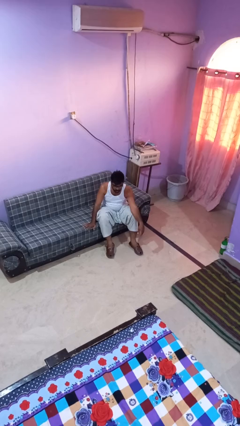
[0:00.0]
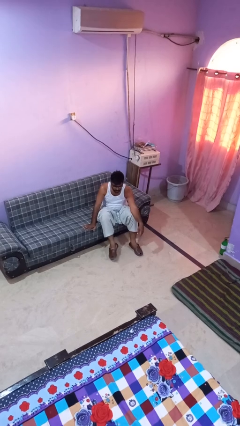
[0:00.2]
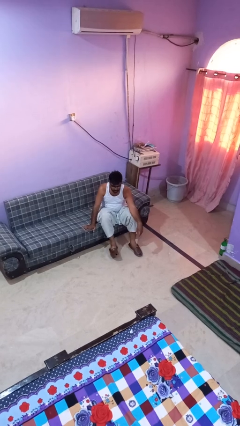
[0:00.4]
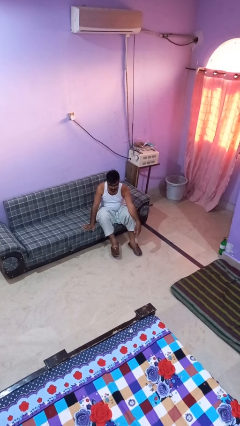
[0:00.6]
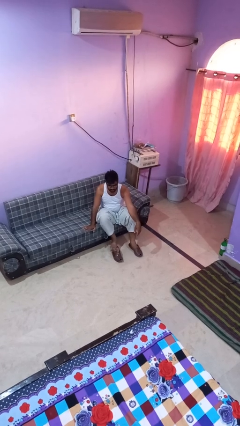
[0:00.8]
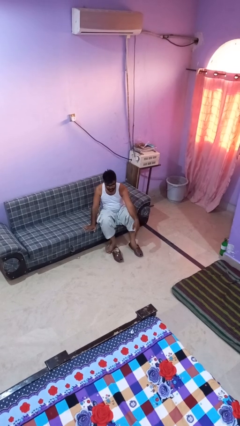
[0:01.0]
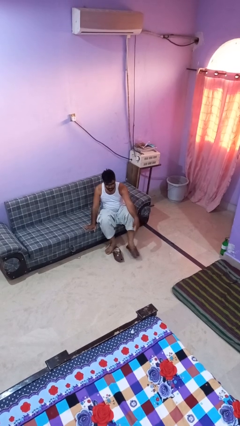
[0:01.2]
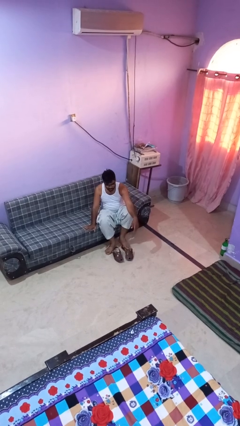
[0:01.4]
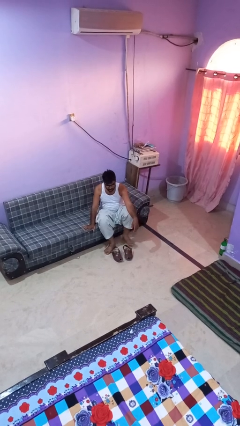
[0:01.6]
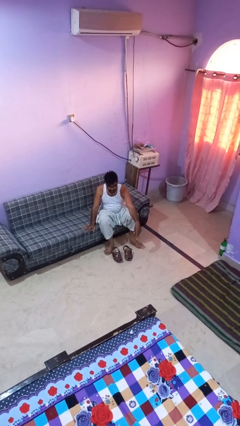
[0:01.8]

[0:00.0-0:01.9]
person takes off shoes

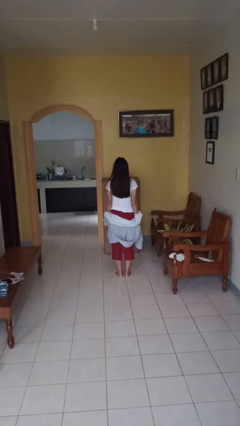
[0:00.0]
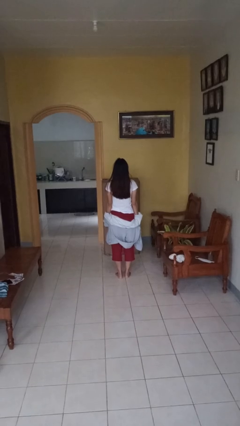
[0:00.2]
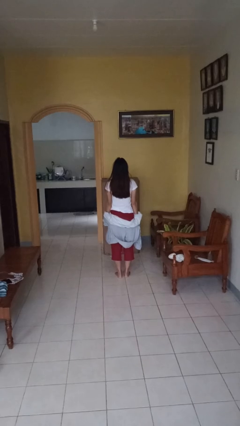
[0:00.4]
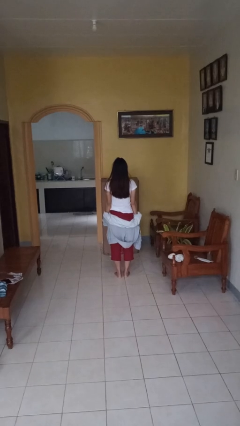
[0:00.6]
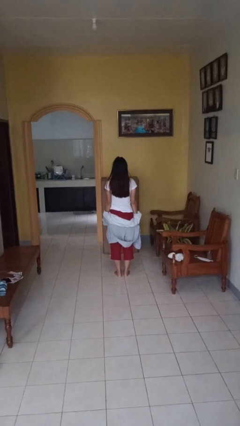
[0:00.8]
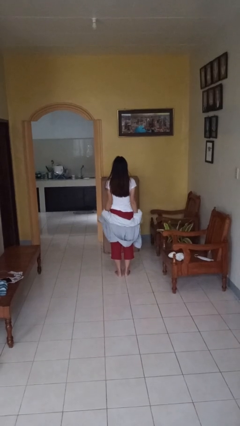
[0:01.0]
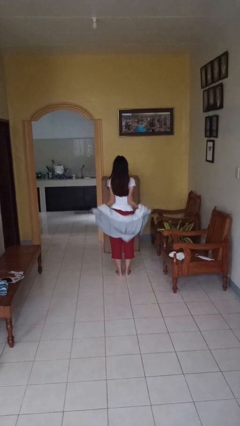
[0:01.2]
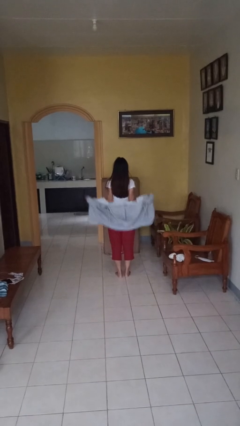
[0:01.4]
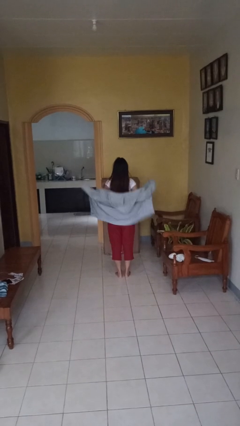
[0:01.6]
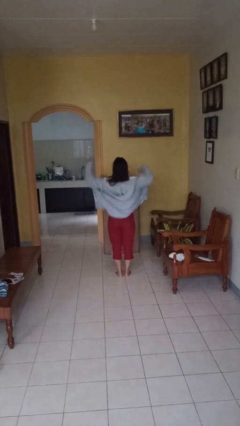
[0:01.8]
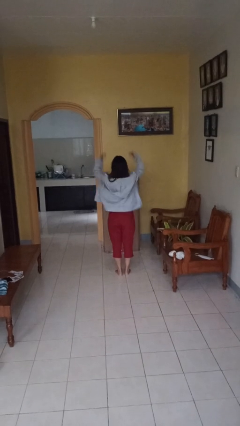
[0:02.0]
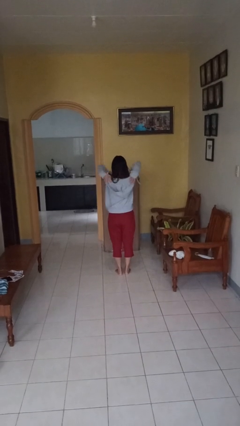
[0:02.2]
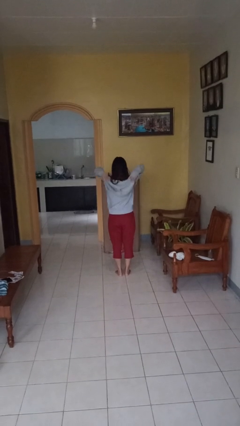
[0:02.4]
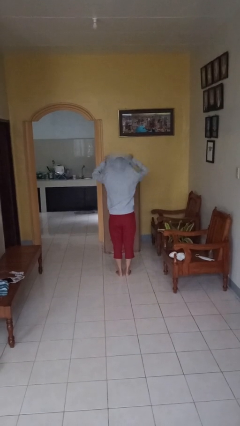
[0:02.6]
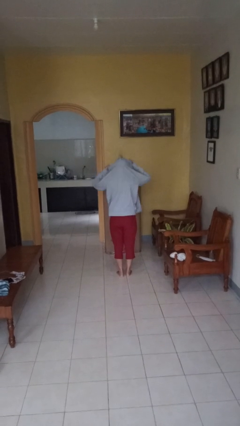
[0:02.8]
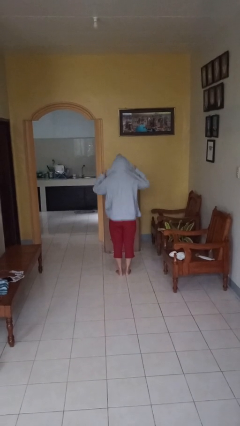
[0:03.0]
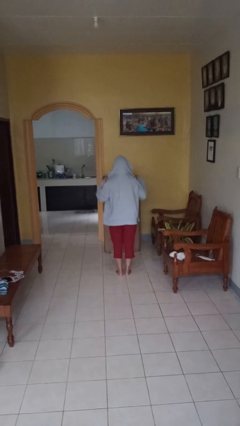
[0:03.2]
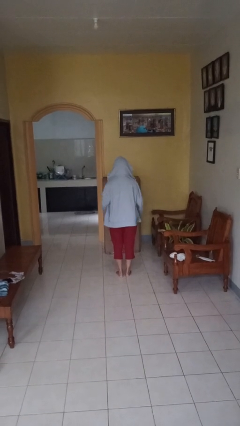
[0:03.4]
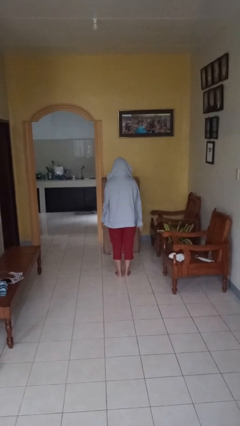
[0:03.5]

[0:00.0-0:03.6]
person puts on hoodie

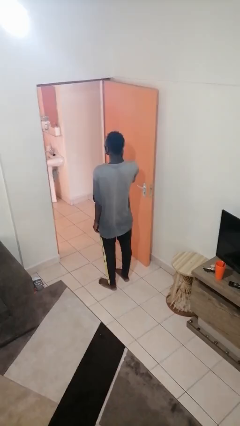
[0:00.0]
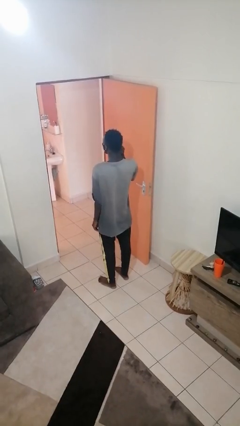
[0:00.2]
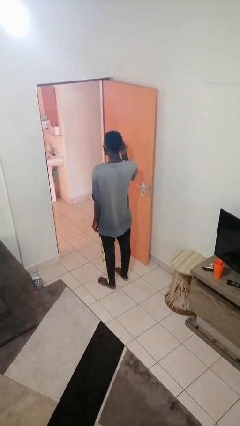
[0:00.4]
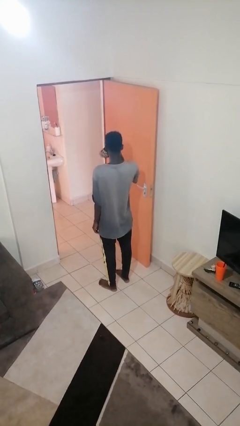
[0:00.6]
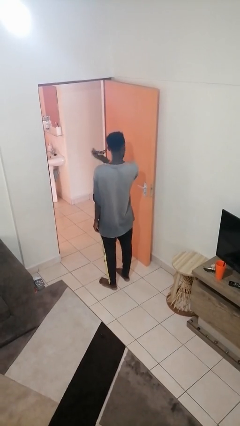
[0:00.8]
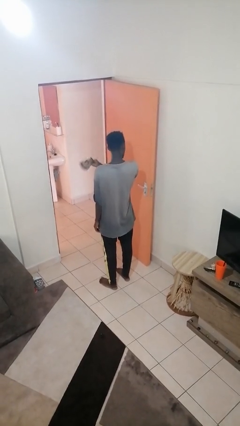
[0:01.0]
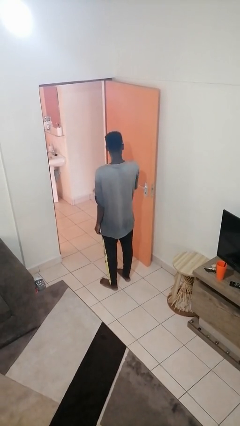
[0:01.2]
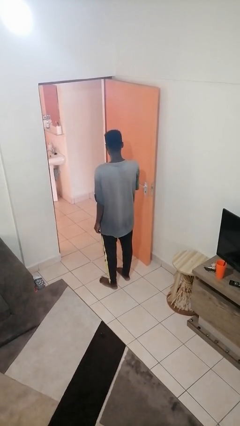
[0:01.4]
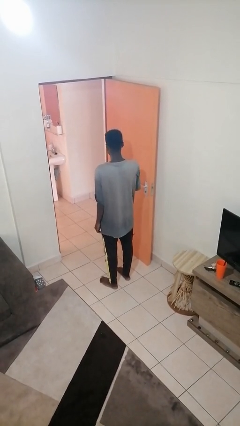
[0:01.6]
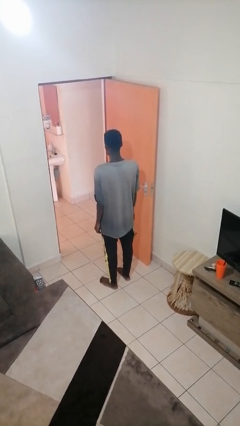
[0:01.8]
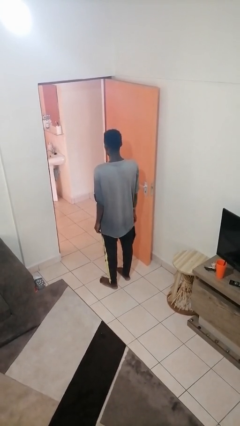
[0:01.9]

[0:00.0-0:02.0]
person takes off facemask

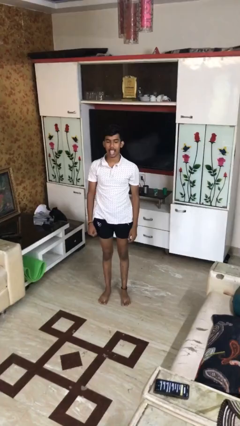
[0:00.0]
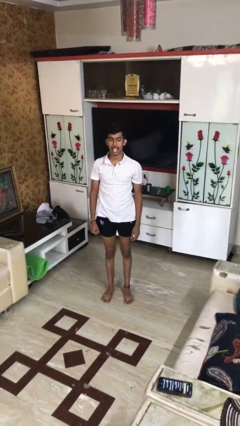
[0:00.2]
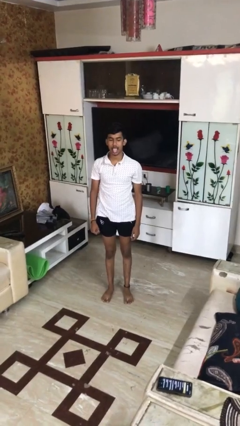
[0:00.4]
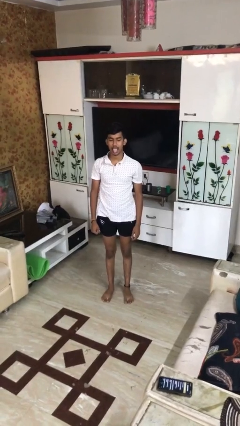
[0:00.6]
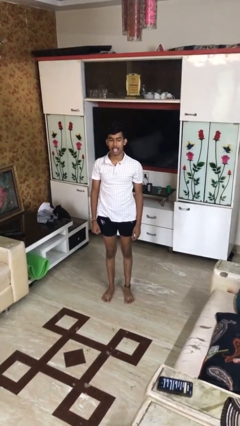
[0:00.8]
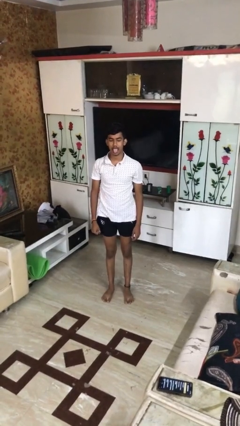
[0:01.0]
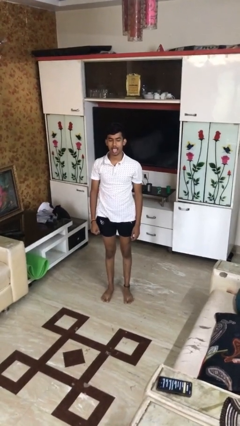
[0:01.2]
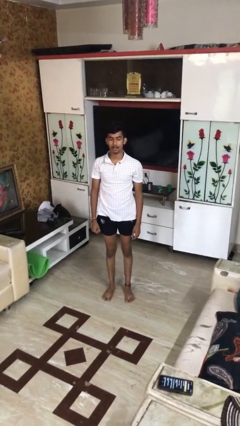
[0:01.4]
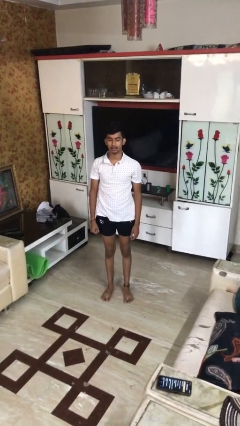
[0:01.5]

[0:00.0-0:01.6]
person sticks out tongue

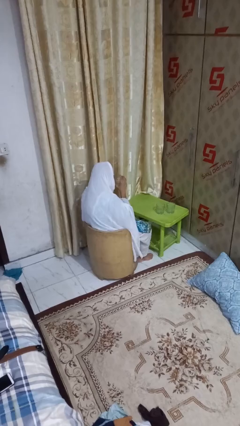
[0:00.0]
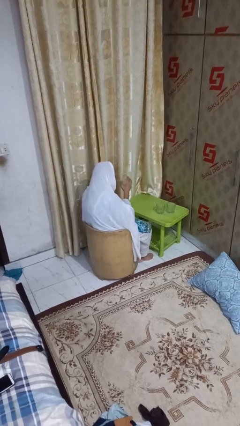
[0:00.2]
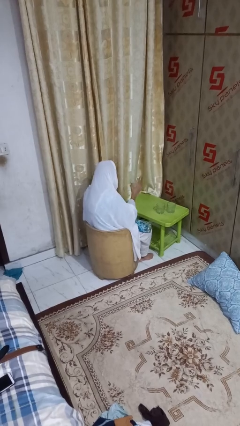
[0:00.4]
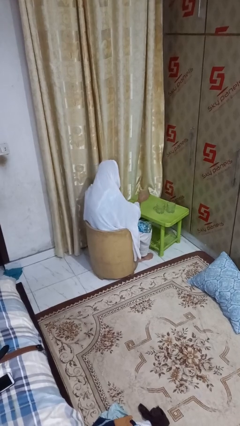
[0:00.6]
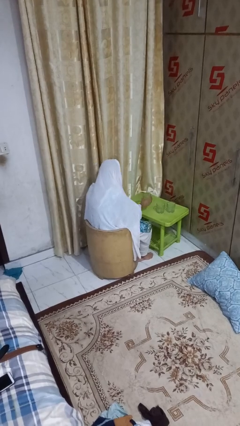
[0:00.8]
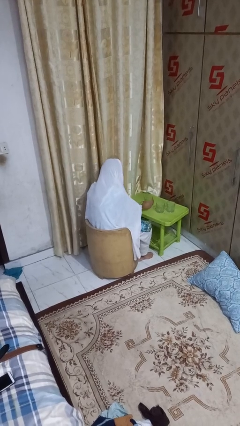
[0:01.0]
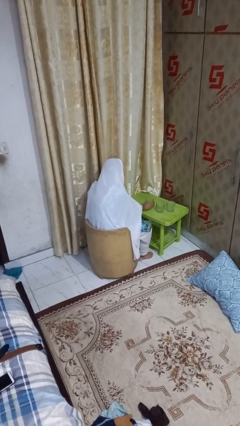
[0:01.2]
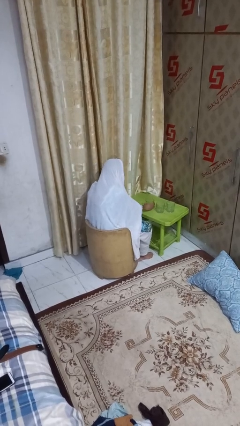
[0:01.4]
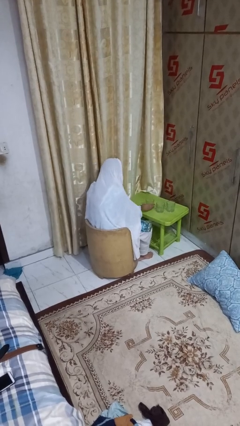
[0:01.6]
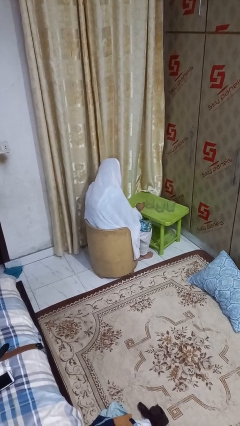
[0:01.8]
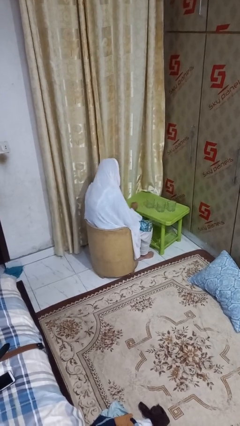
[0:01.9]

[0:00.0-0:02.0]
person puts down object on table

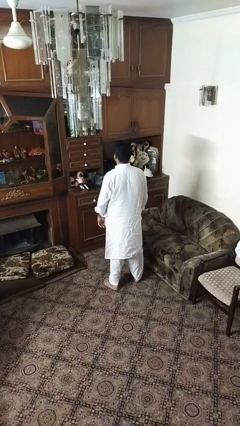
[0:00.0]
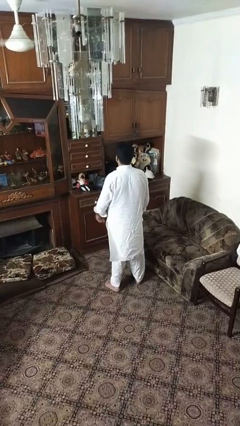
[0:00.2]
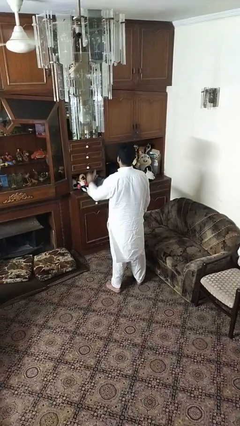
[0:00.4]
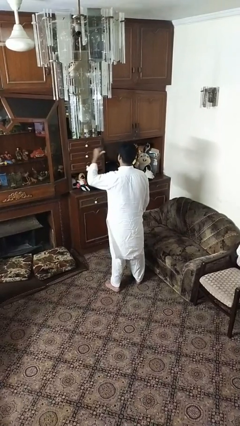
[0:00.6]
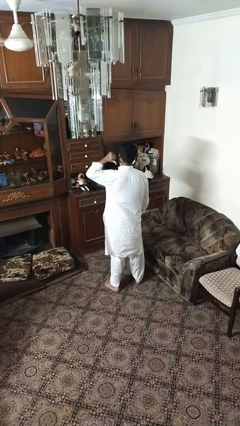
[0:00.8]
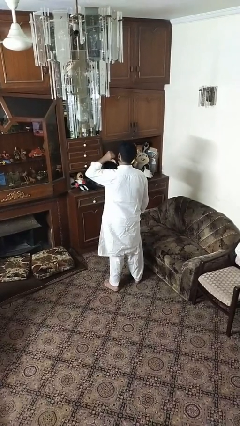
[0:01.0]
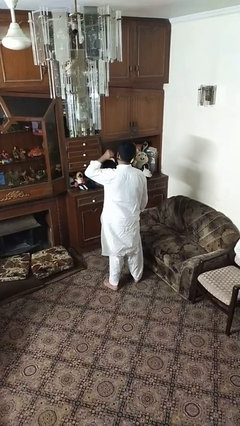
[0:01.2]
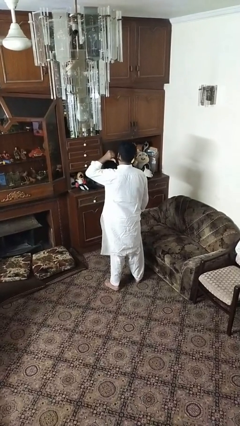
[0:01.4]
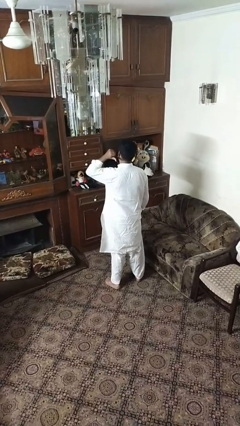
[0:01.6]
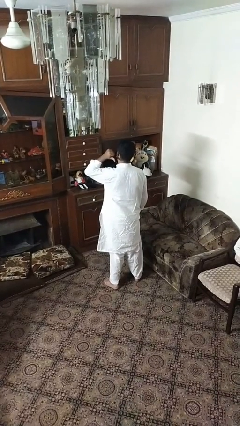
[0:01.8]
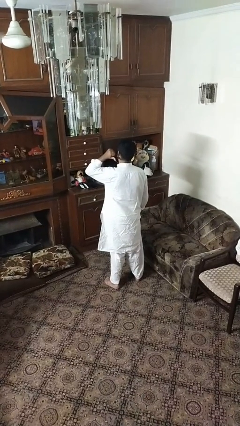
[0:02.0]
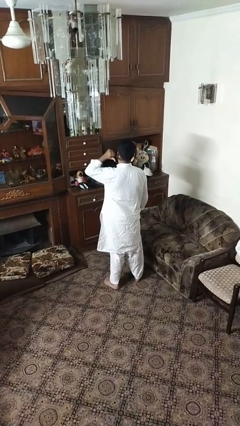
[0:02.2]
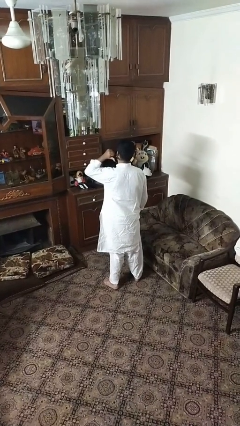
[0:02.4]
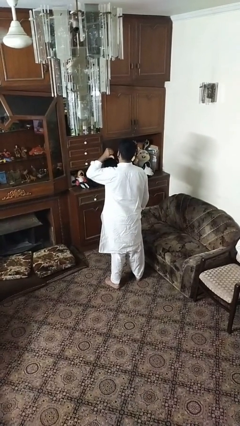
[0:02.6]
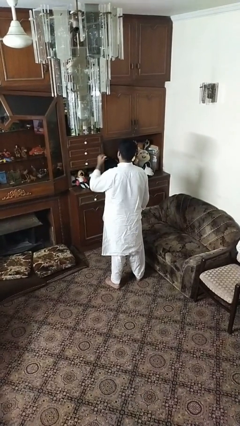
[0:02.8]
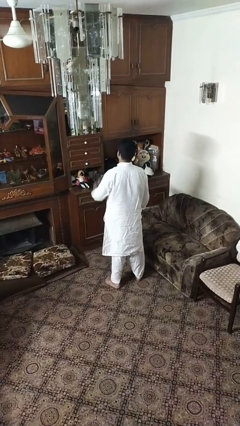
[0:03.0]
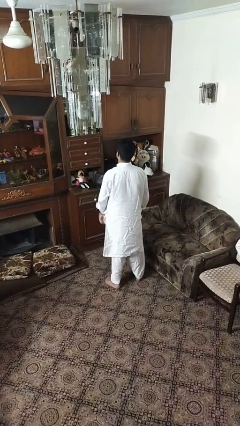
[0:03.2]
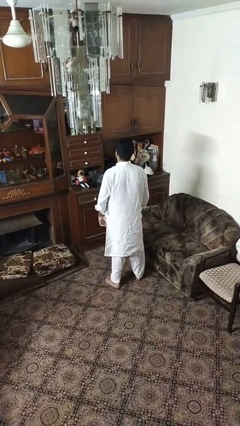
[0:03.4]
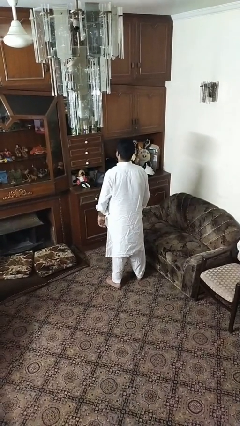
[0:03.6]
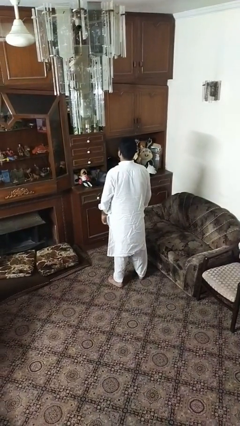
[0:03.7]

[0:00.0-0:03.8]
person gestures behind me

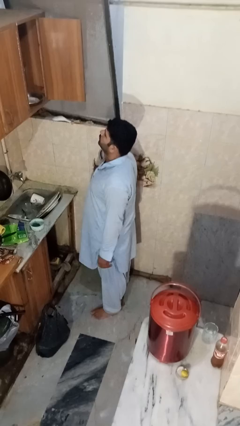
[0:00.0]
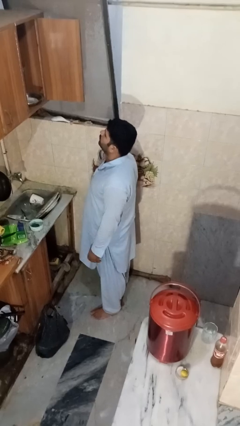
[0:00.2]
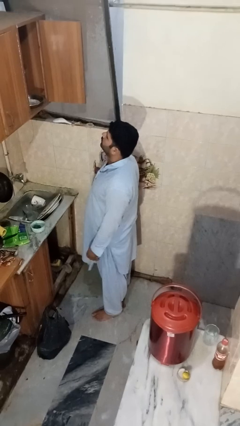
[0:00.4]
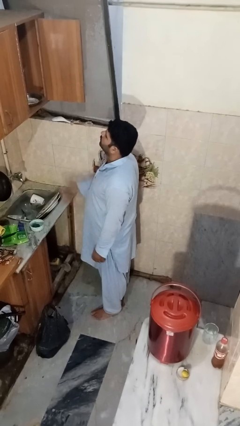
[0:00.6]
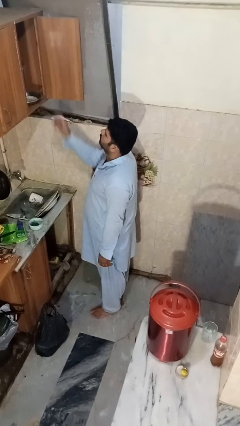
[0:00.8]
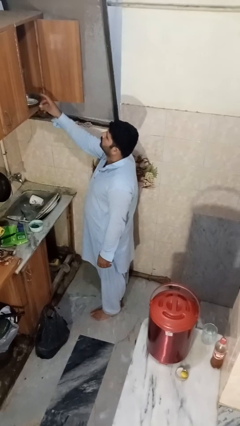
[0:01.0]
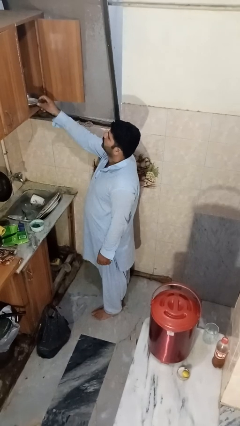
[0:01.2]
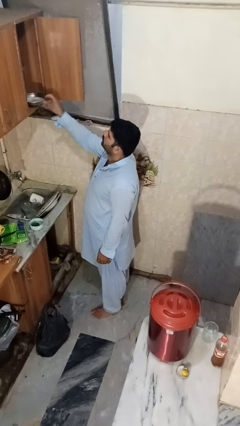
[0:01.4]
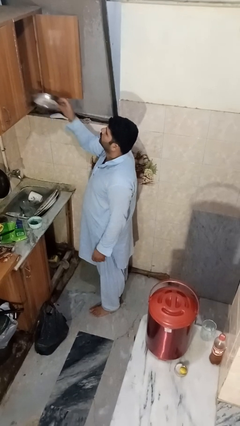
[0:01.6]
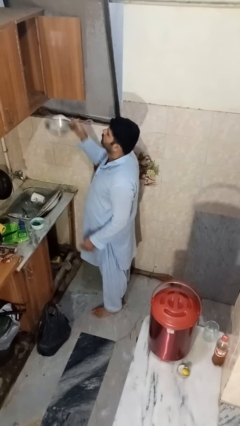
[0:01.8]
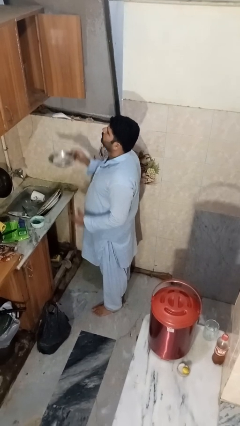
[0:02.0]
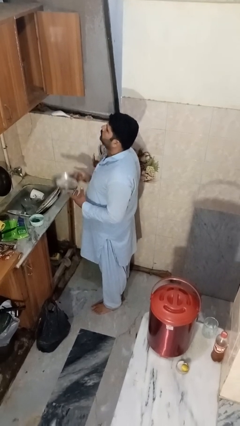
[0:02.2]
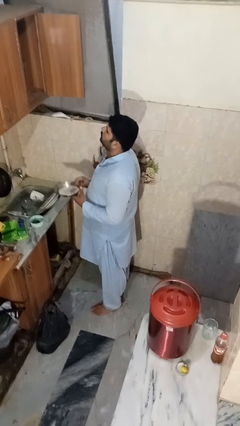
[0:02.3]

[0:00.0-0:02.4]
person takes object from cabinet
